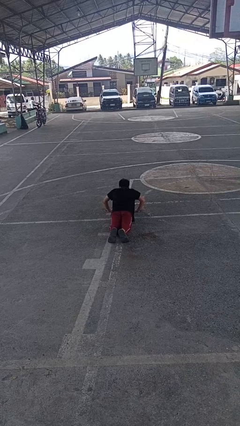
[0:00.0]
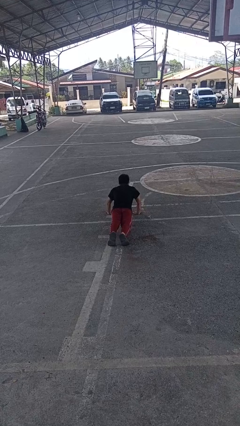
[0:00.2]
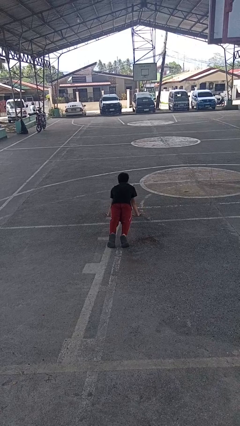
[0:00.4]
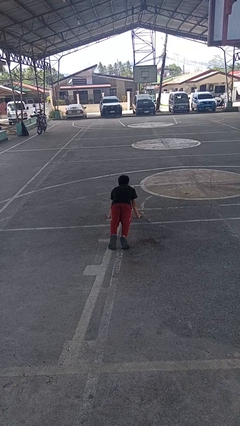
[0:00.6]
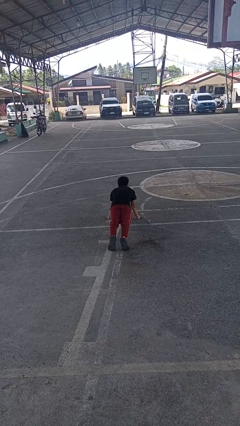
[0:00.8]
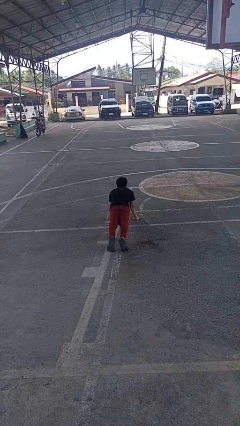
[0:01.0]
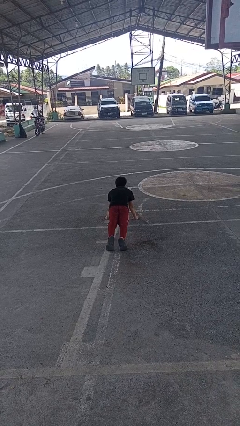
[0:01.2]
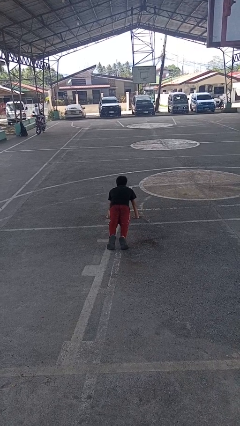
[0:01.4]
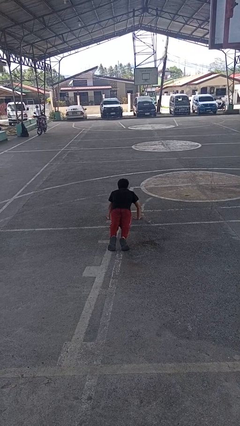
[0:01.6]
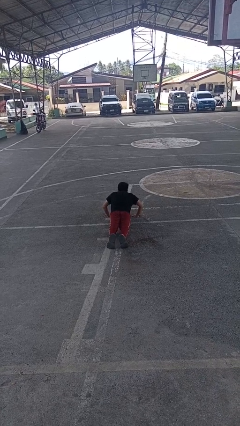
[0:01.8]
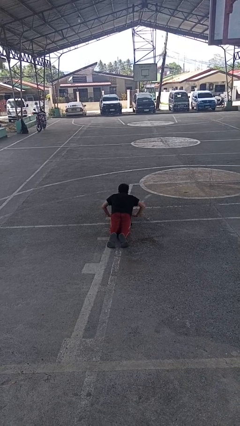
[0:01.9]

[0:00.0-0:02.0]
person exercises with pushup

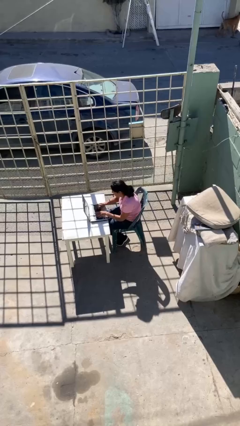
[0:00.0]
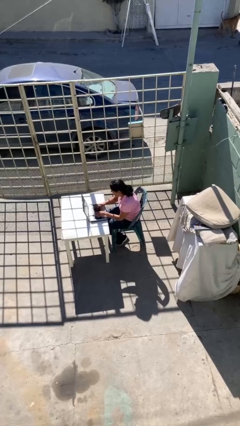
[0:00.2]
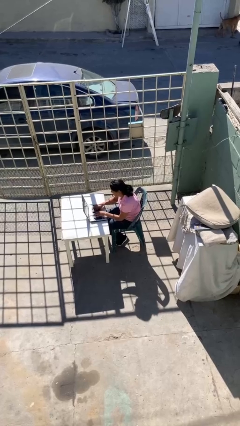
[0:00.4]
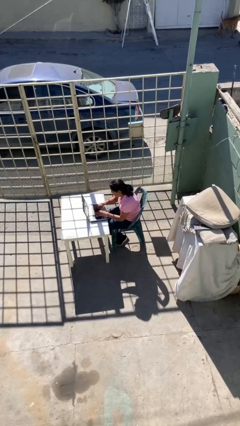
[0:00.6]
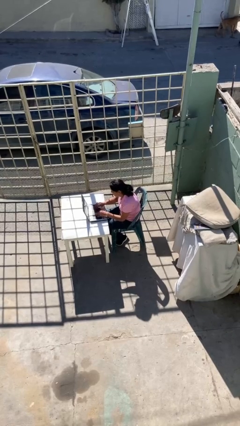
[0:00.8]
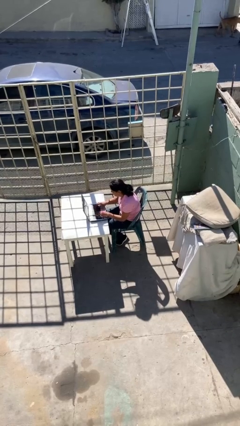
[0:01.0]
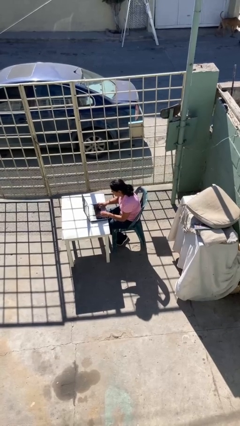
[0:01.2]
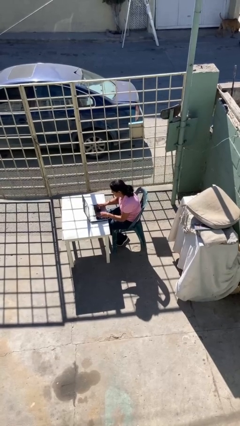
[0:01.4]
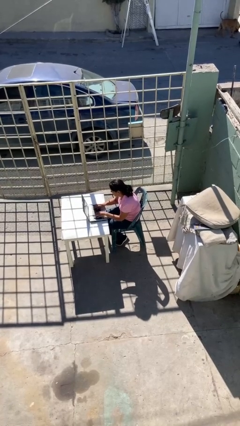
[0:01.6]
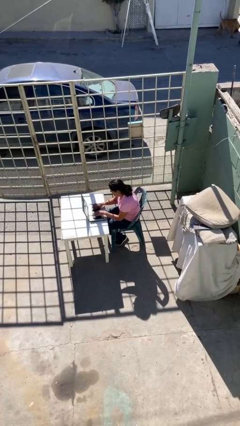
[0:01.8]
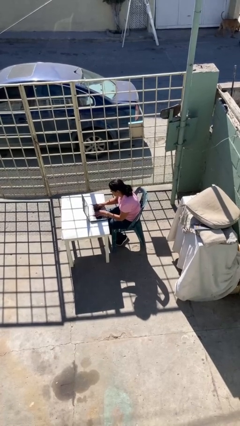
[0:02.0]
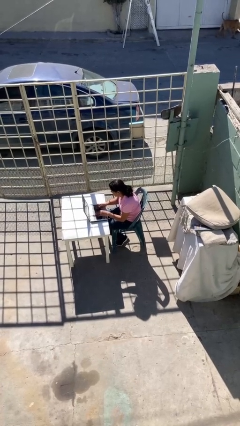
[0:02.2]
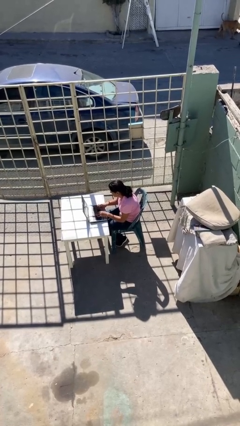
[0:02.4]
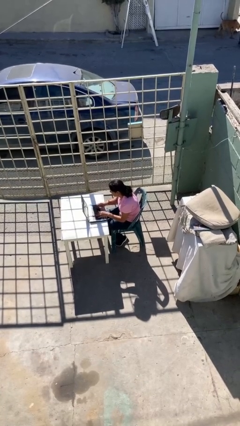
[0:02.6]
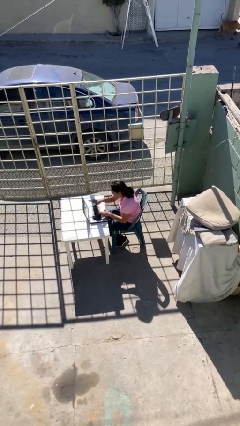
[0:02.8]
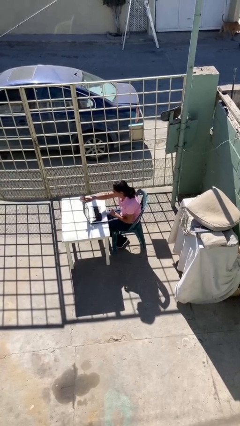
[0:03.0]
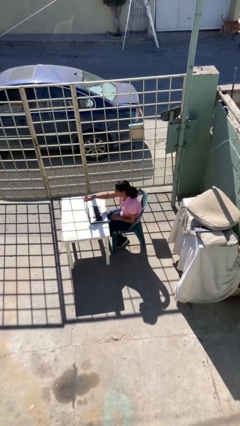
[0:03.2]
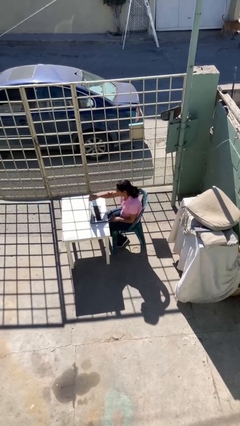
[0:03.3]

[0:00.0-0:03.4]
person interacts with laptop

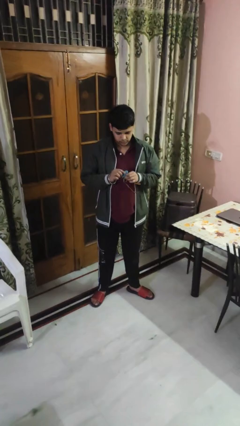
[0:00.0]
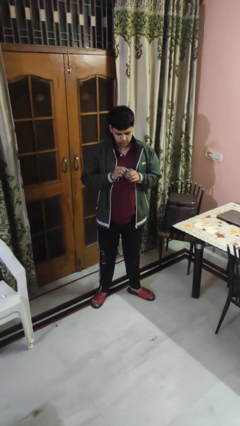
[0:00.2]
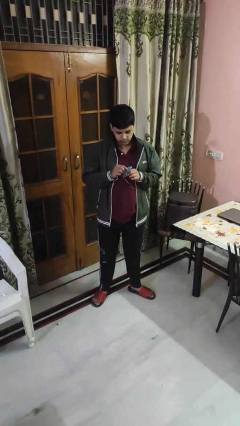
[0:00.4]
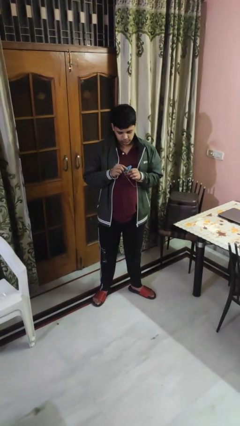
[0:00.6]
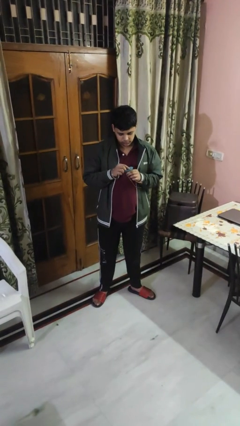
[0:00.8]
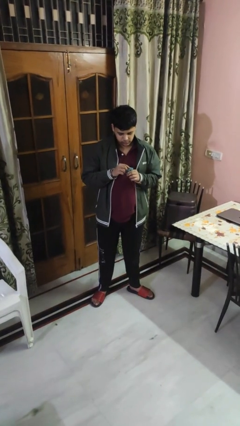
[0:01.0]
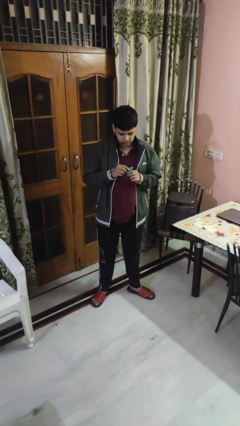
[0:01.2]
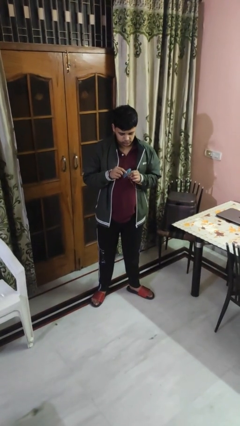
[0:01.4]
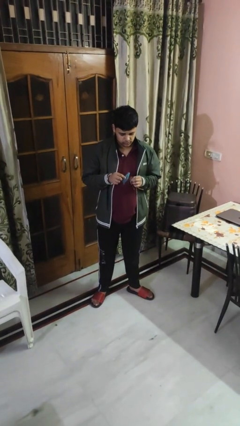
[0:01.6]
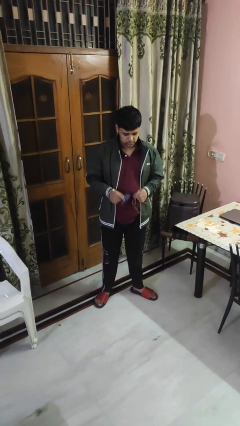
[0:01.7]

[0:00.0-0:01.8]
person cleans eyeglasses

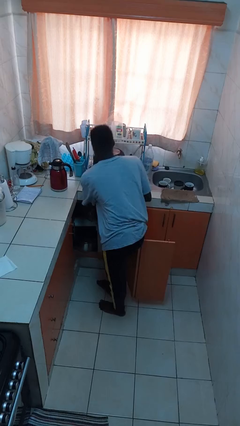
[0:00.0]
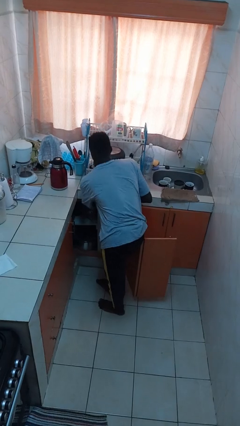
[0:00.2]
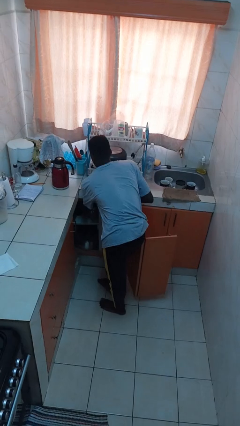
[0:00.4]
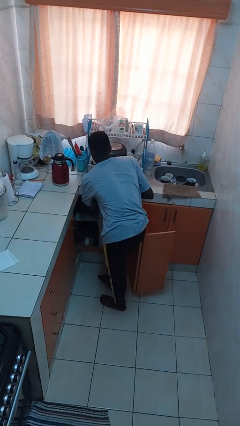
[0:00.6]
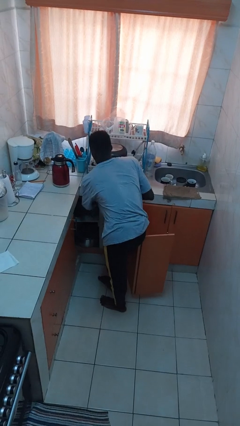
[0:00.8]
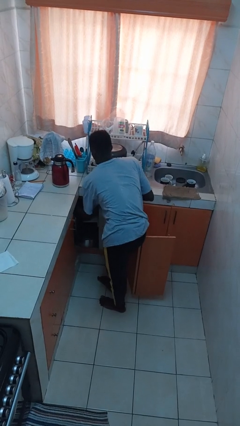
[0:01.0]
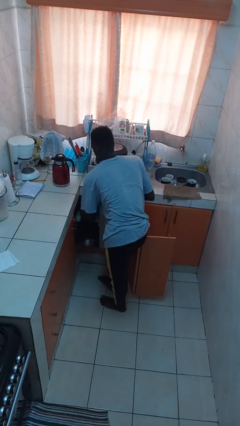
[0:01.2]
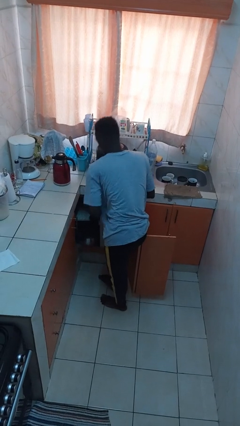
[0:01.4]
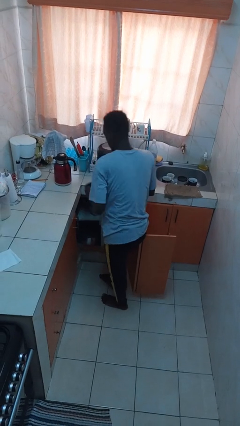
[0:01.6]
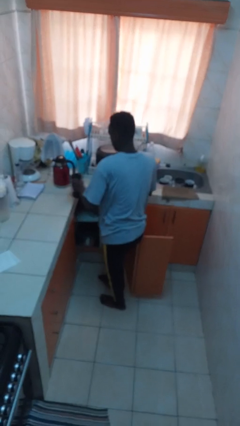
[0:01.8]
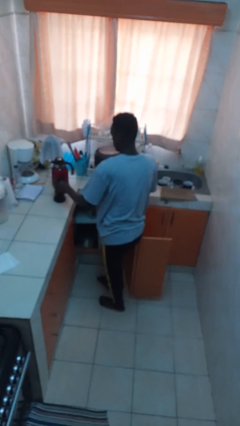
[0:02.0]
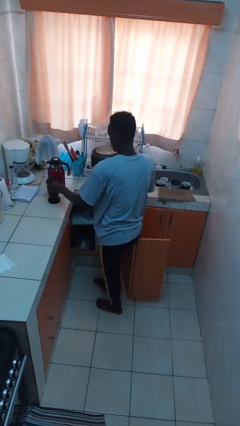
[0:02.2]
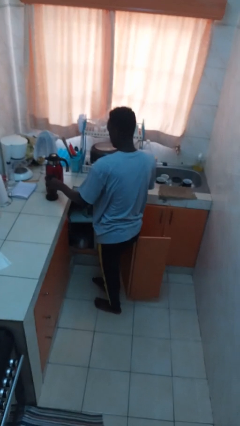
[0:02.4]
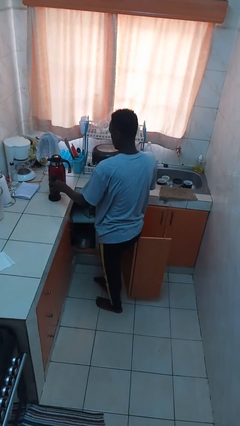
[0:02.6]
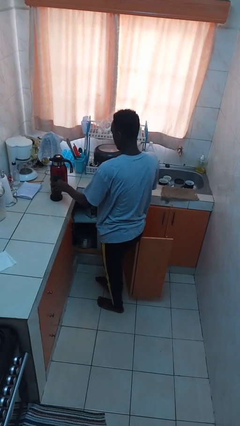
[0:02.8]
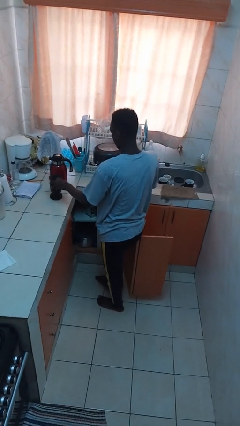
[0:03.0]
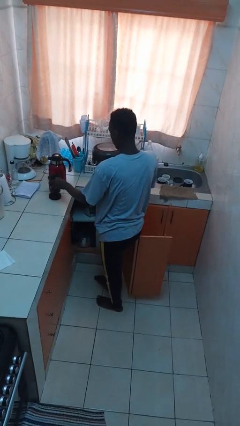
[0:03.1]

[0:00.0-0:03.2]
person takes object from cabinet

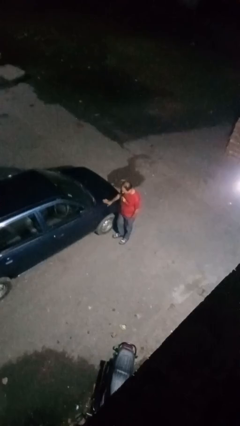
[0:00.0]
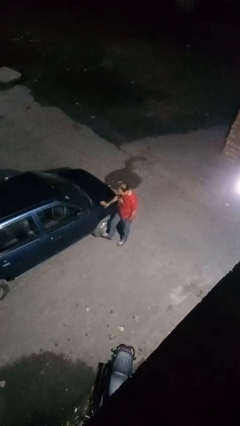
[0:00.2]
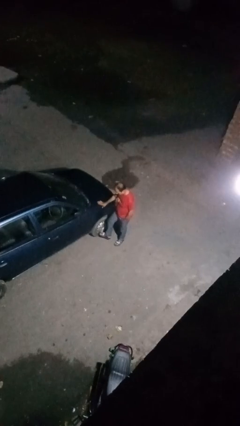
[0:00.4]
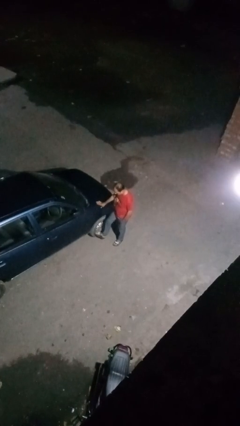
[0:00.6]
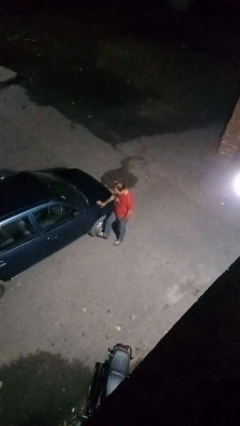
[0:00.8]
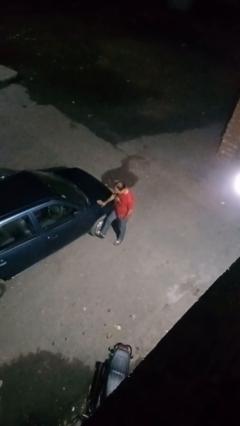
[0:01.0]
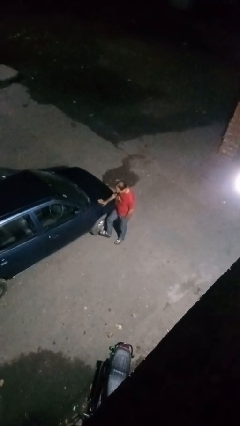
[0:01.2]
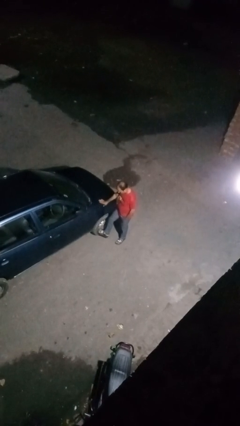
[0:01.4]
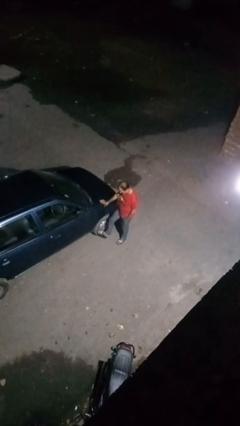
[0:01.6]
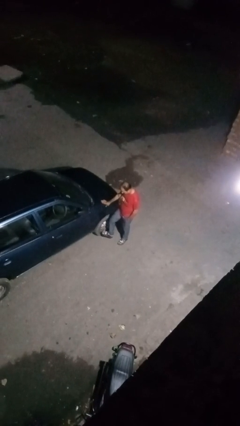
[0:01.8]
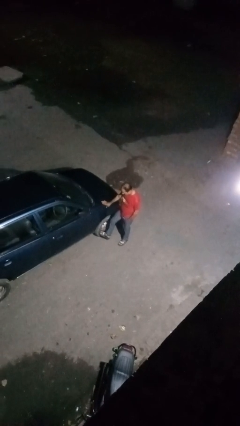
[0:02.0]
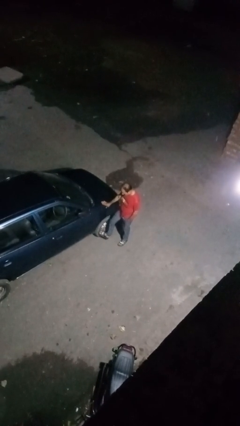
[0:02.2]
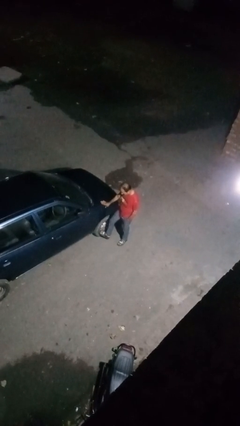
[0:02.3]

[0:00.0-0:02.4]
person kicks car tires

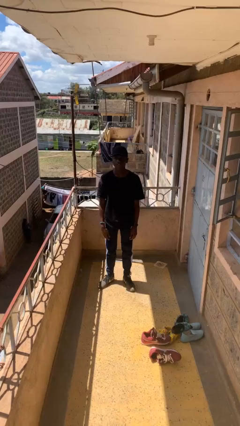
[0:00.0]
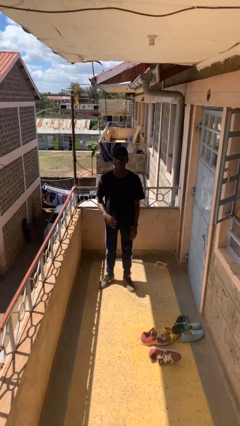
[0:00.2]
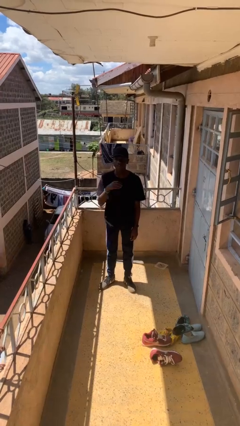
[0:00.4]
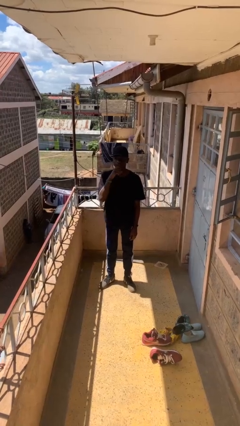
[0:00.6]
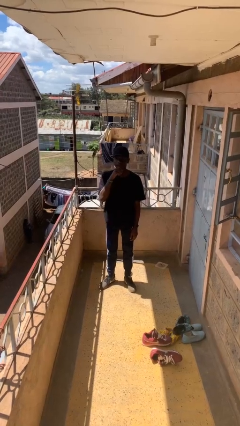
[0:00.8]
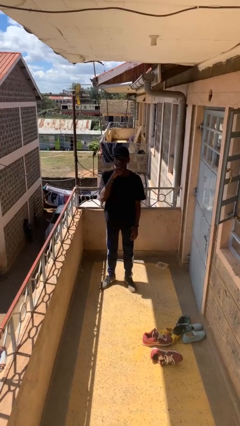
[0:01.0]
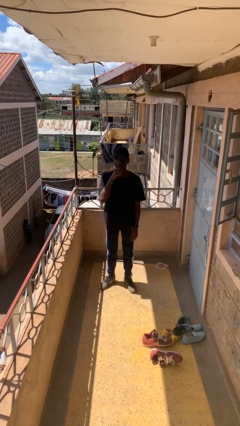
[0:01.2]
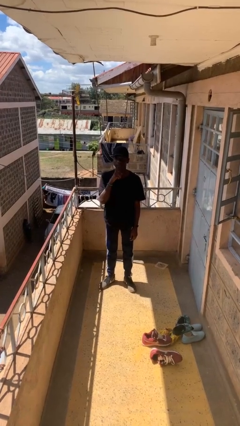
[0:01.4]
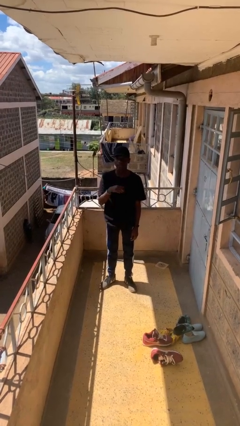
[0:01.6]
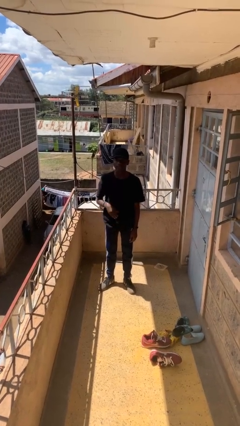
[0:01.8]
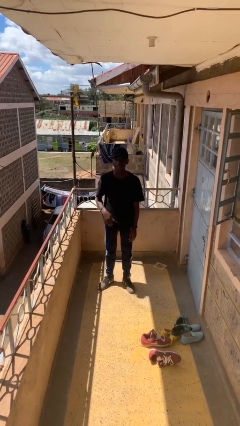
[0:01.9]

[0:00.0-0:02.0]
person strokes chin

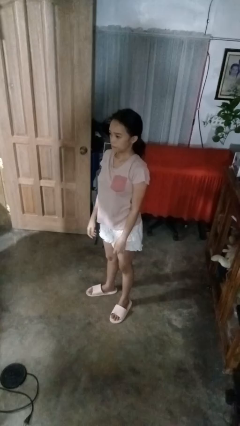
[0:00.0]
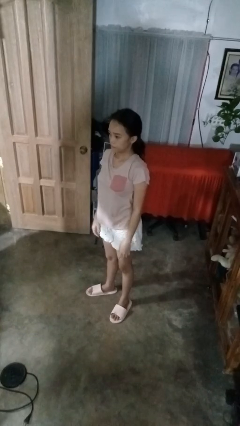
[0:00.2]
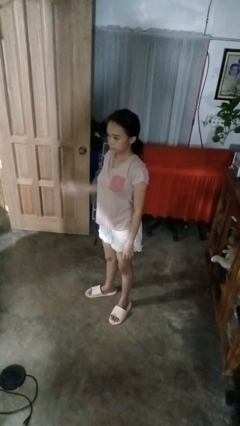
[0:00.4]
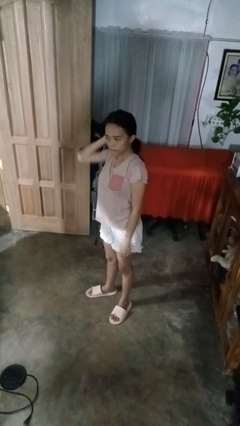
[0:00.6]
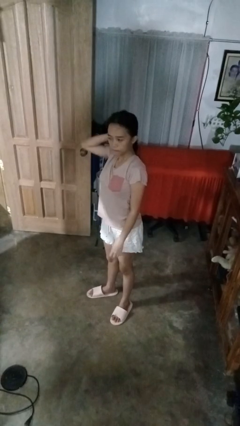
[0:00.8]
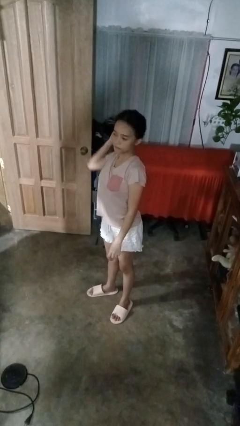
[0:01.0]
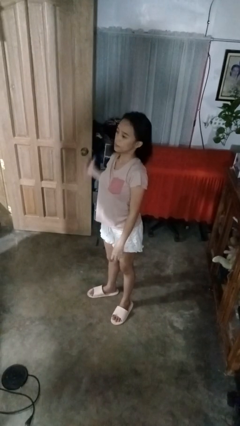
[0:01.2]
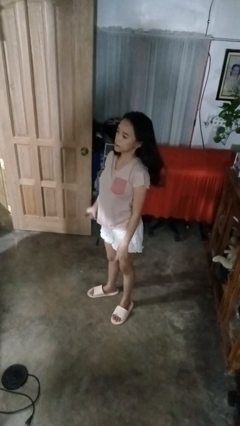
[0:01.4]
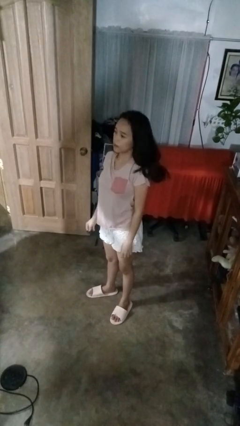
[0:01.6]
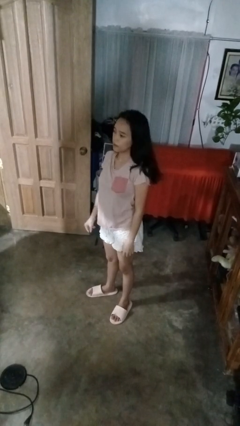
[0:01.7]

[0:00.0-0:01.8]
person takes off hairtie

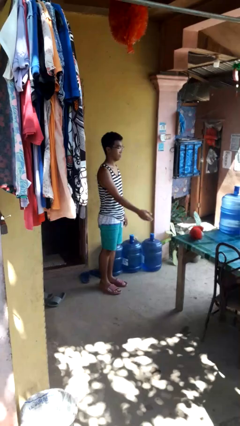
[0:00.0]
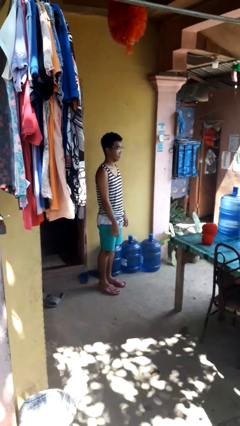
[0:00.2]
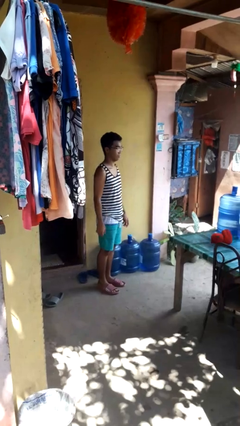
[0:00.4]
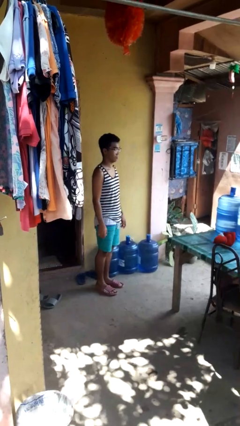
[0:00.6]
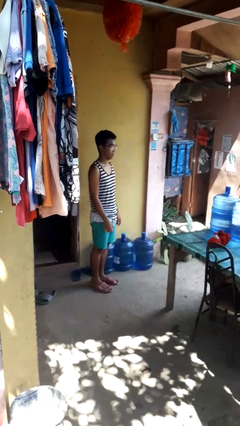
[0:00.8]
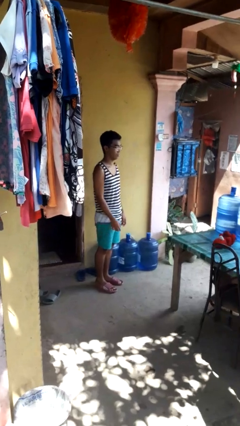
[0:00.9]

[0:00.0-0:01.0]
person throws object on table
